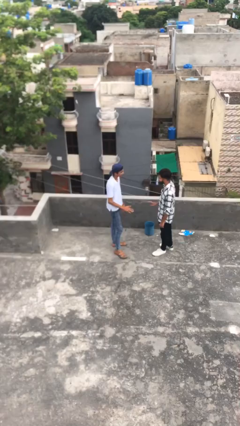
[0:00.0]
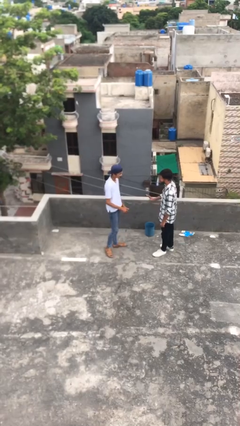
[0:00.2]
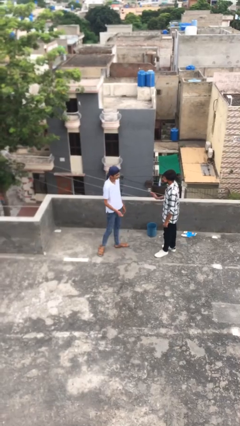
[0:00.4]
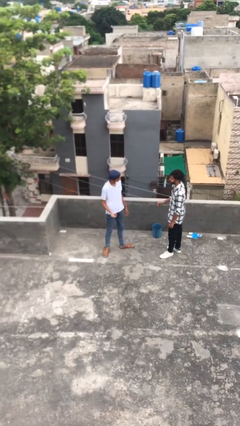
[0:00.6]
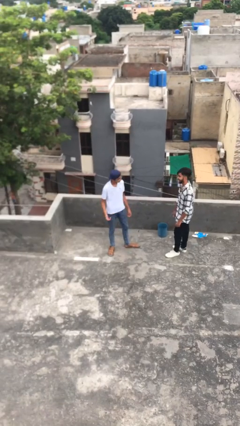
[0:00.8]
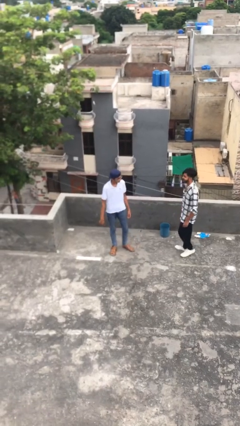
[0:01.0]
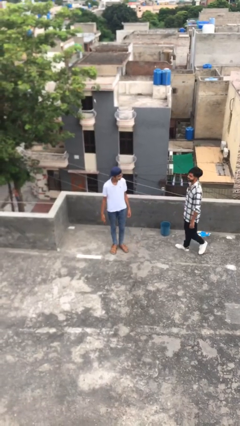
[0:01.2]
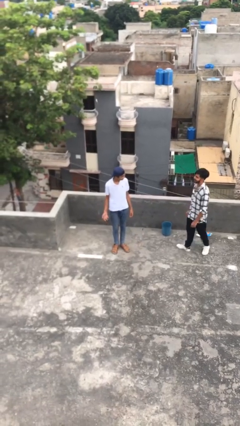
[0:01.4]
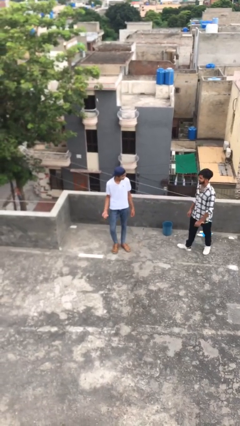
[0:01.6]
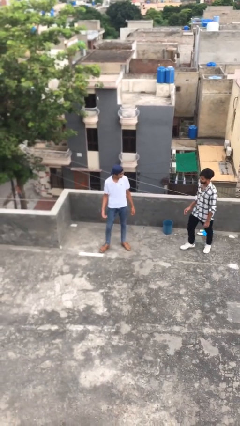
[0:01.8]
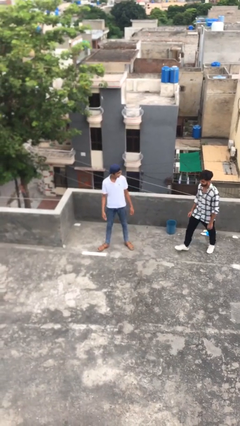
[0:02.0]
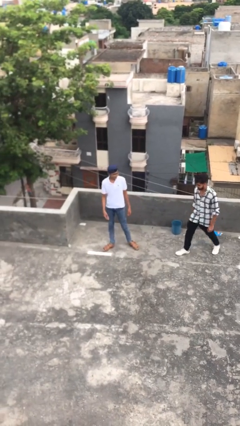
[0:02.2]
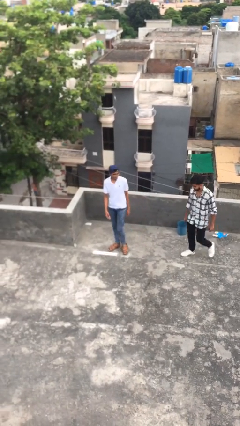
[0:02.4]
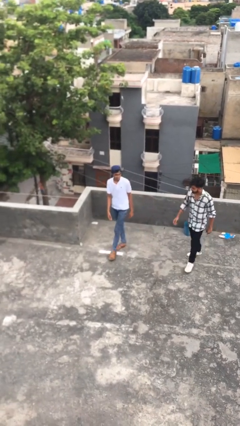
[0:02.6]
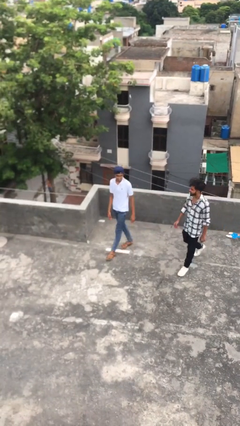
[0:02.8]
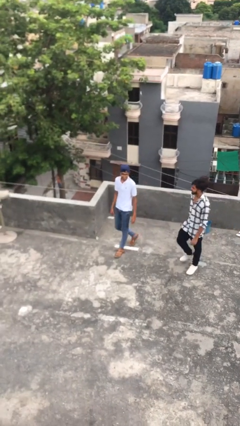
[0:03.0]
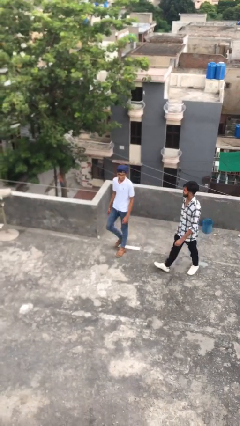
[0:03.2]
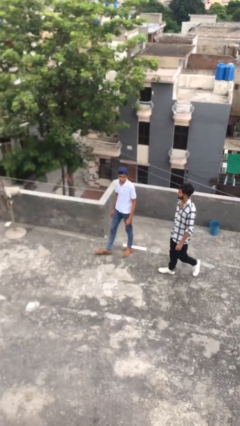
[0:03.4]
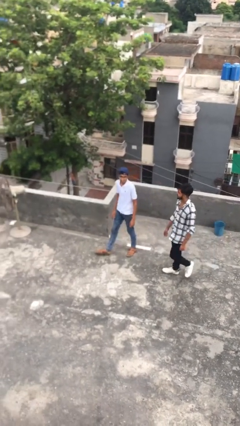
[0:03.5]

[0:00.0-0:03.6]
person talks to person

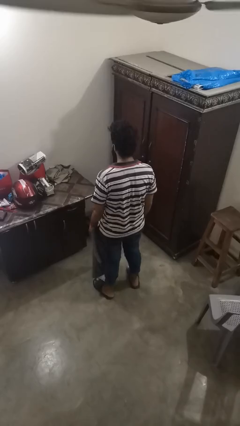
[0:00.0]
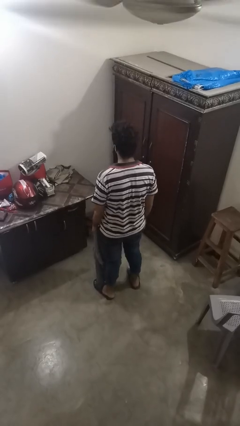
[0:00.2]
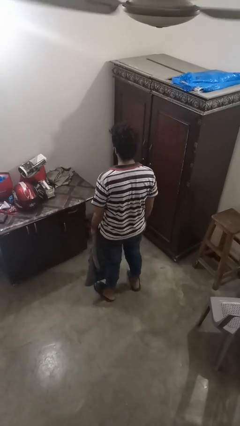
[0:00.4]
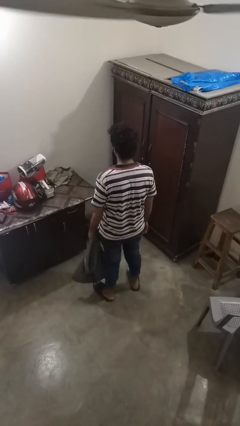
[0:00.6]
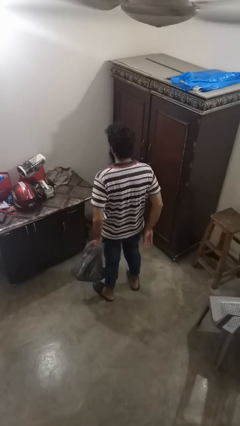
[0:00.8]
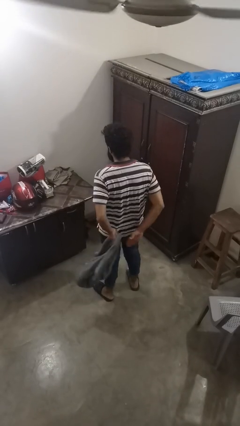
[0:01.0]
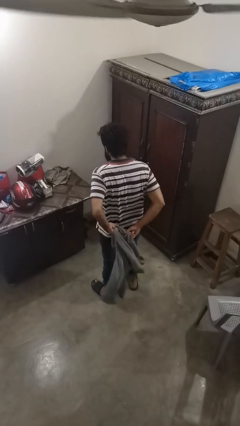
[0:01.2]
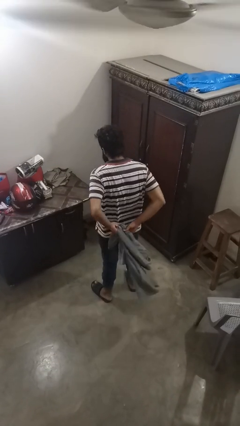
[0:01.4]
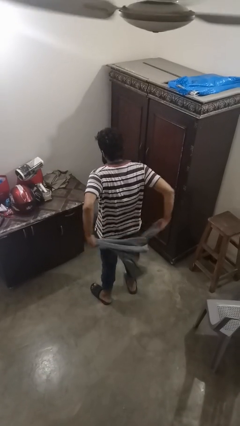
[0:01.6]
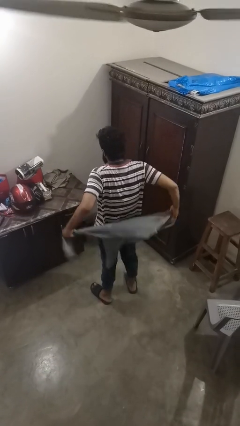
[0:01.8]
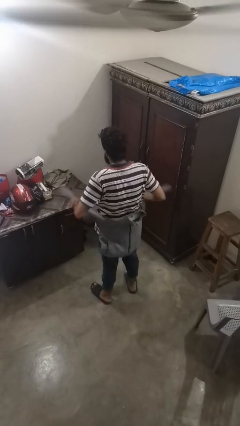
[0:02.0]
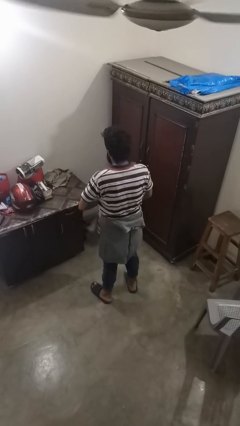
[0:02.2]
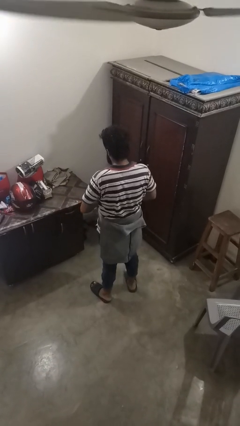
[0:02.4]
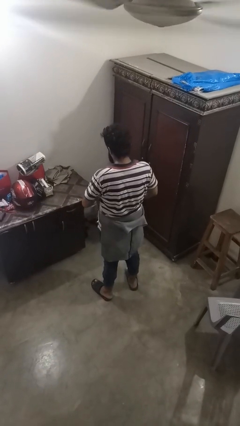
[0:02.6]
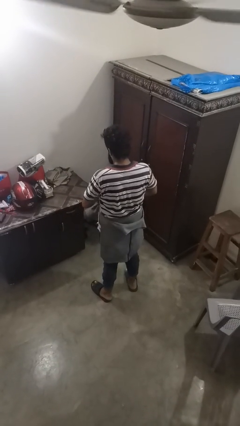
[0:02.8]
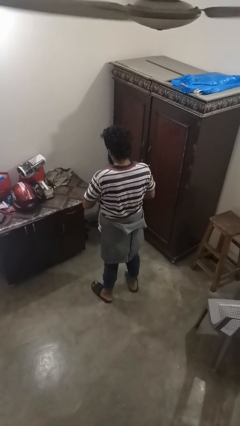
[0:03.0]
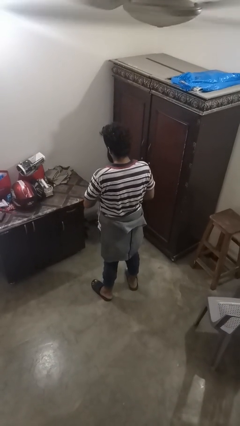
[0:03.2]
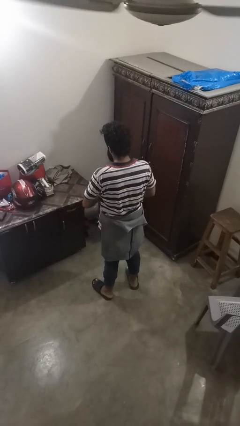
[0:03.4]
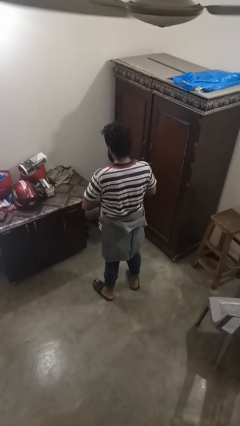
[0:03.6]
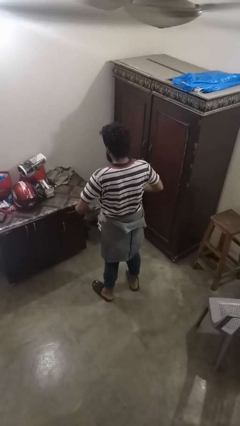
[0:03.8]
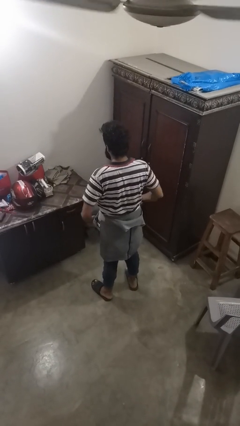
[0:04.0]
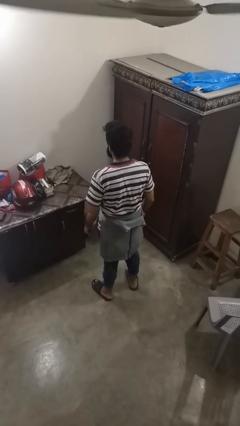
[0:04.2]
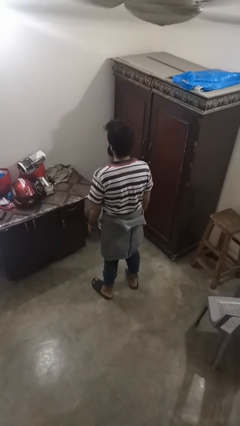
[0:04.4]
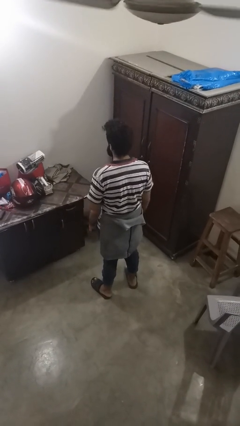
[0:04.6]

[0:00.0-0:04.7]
person ties jacket around waist

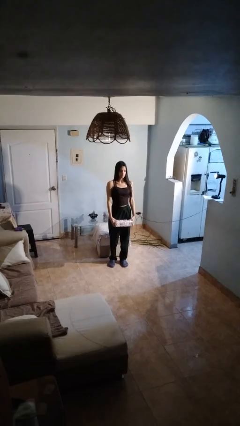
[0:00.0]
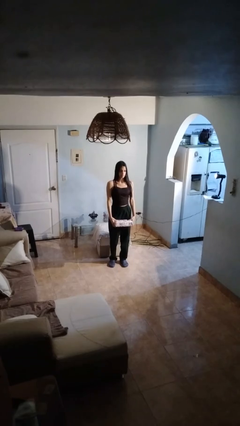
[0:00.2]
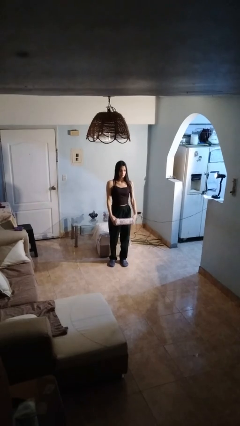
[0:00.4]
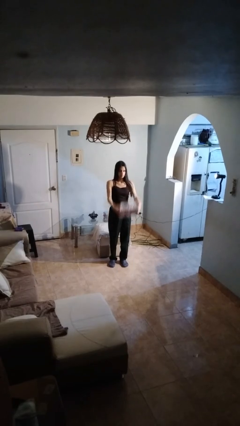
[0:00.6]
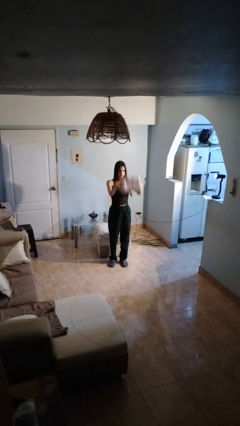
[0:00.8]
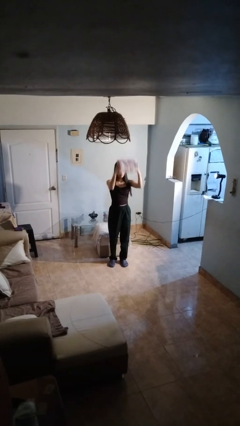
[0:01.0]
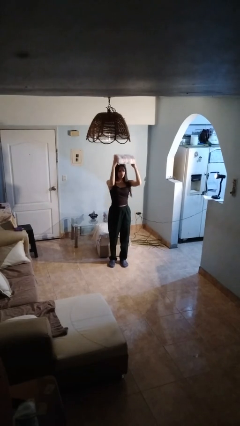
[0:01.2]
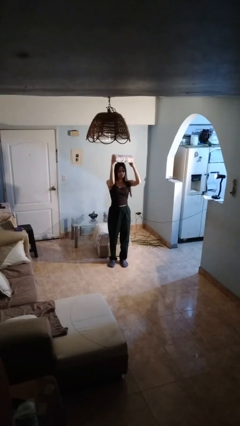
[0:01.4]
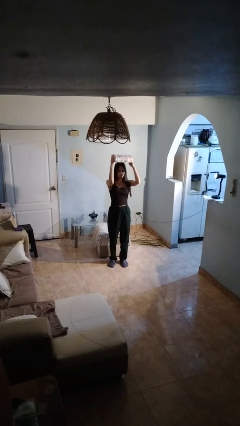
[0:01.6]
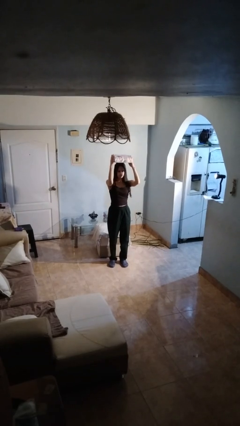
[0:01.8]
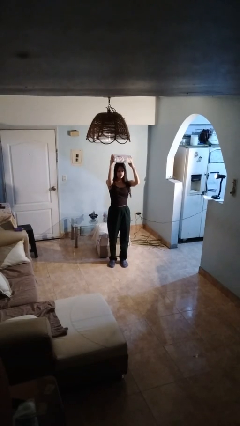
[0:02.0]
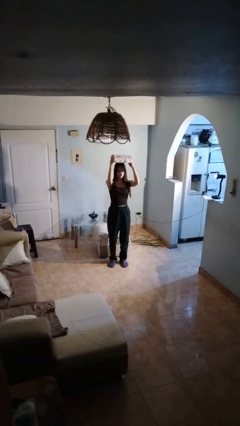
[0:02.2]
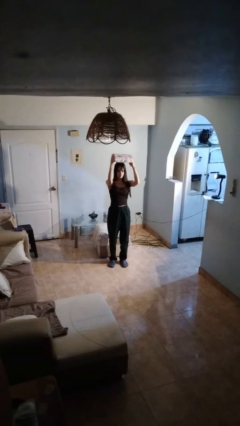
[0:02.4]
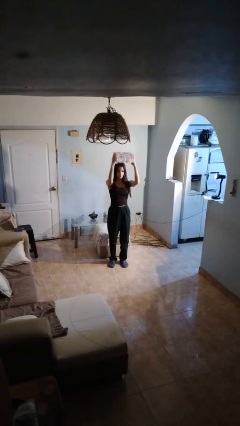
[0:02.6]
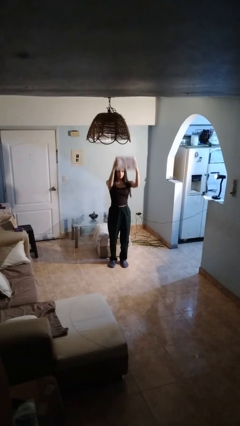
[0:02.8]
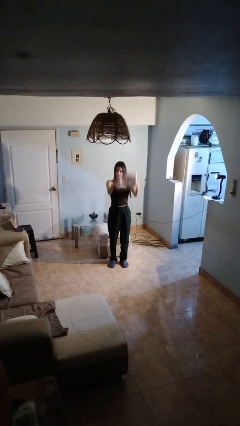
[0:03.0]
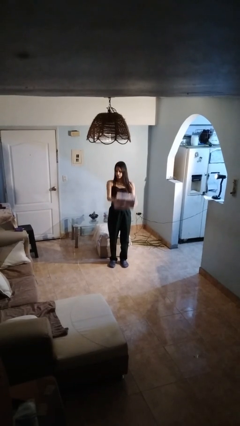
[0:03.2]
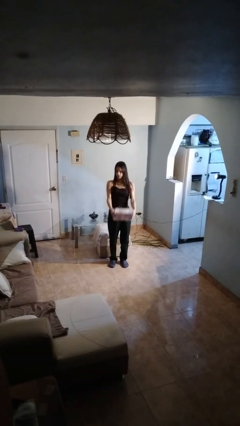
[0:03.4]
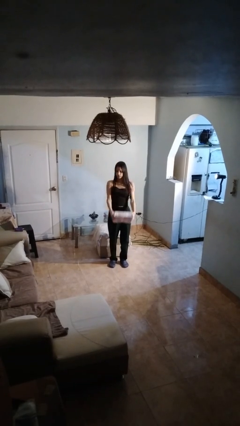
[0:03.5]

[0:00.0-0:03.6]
person holds object above head

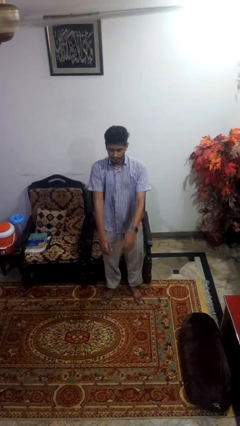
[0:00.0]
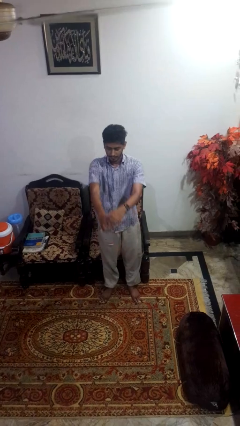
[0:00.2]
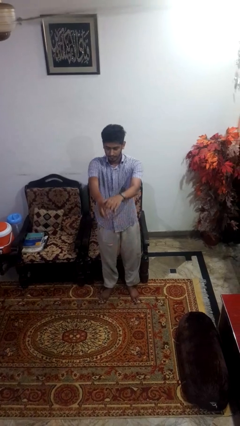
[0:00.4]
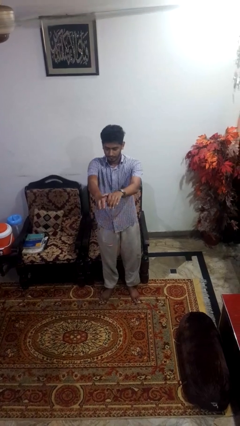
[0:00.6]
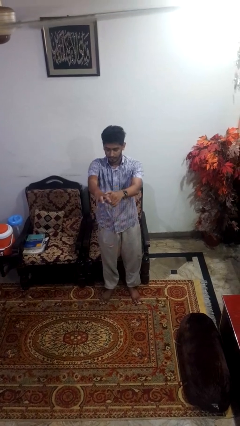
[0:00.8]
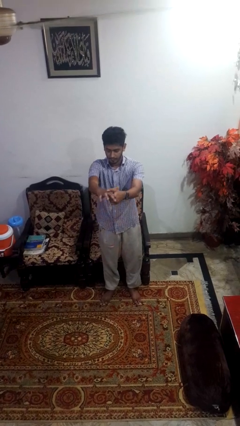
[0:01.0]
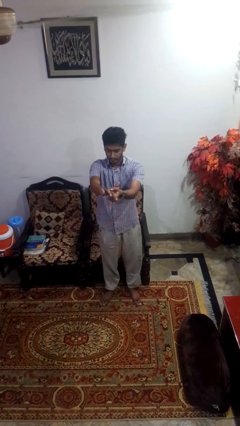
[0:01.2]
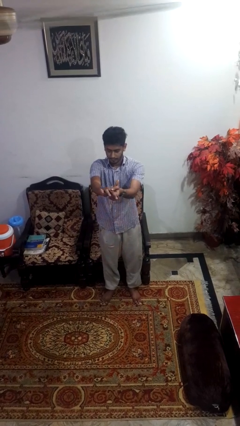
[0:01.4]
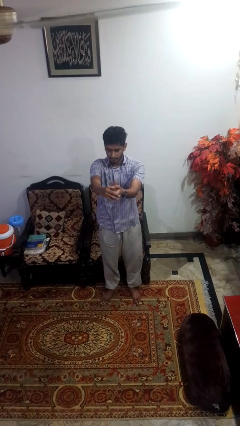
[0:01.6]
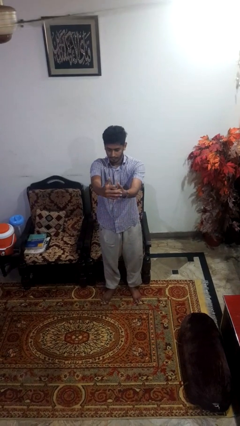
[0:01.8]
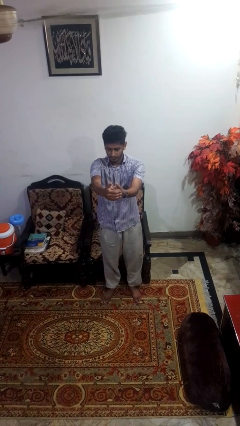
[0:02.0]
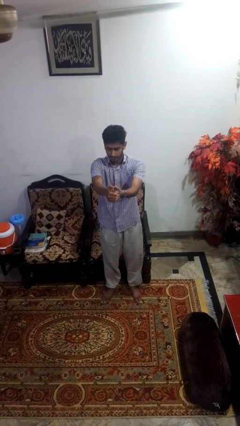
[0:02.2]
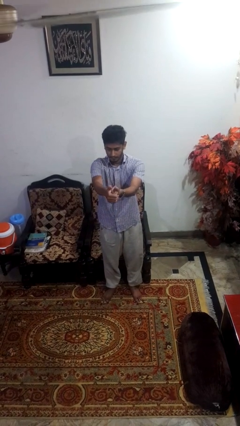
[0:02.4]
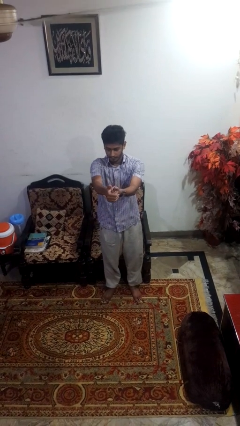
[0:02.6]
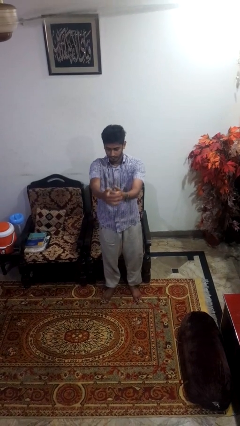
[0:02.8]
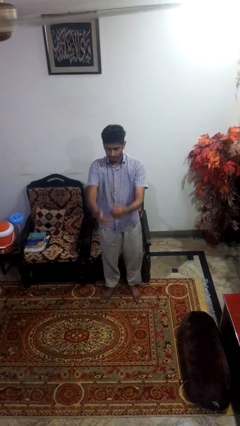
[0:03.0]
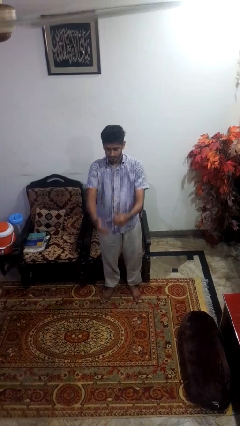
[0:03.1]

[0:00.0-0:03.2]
person cracks knuckles

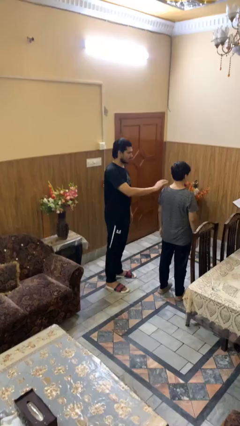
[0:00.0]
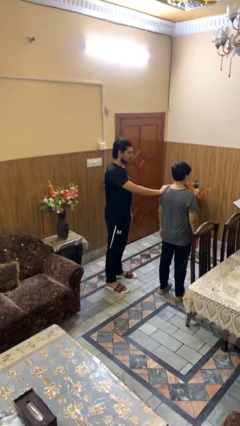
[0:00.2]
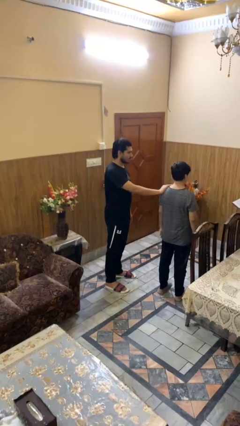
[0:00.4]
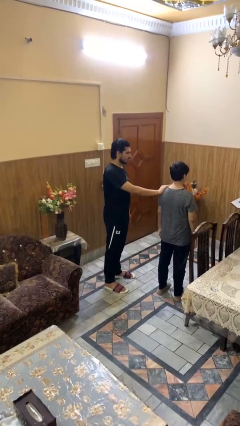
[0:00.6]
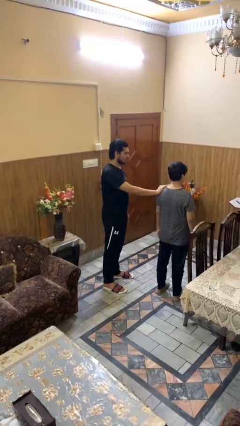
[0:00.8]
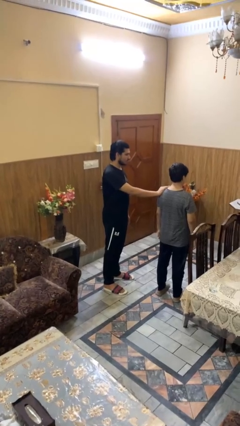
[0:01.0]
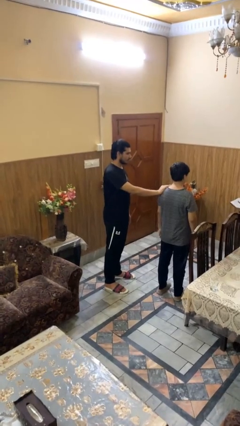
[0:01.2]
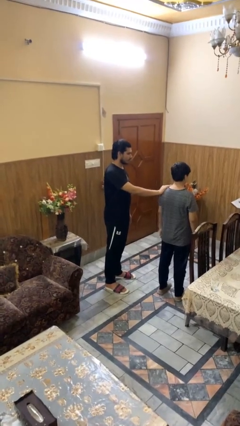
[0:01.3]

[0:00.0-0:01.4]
person grabs person by shoulder

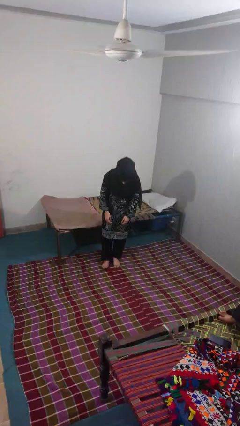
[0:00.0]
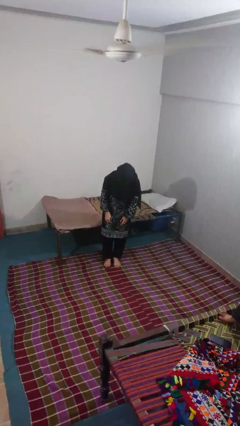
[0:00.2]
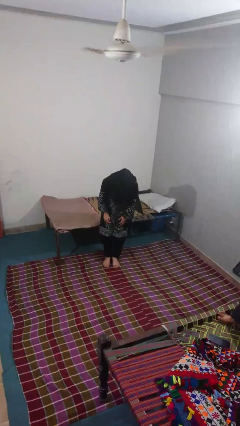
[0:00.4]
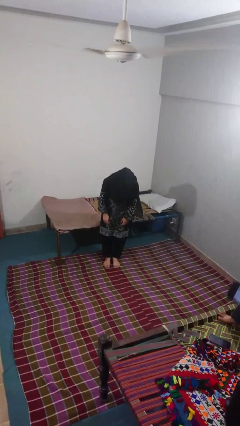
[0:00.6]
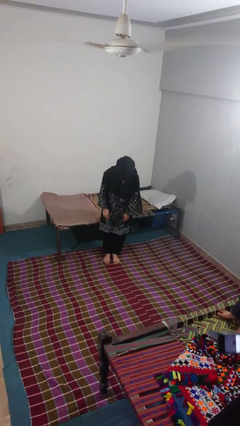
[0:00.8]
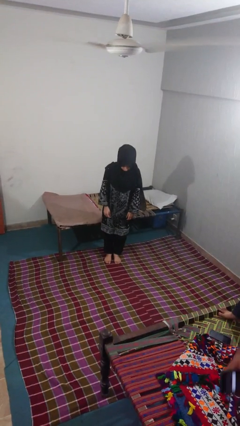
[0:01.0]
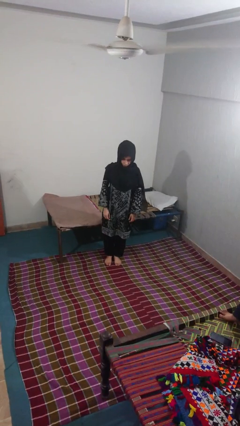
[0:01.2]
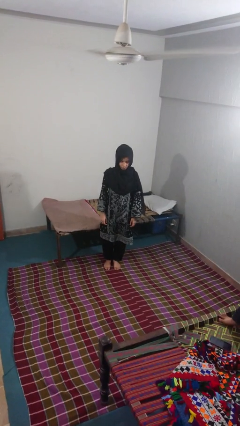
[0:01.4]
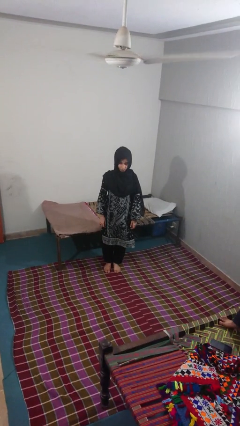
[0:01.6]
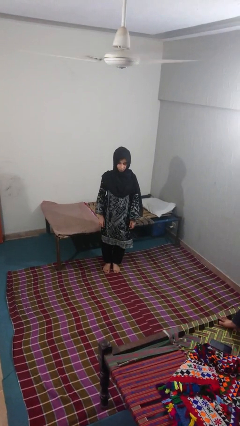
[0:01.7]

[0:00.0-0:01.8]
person bows
